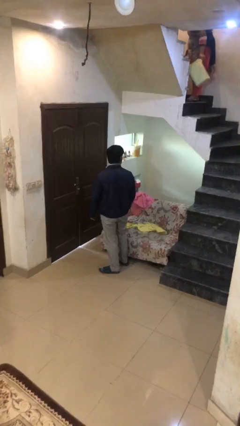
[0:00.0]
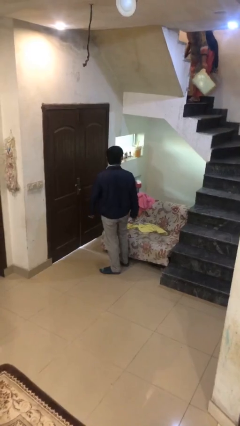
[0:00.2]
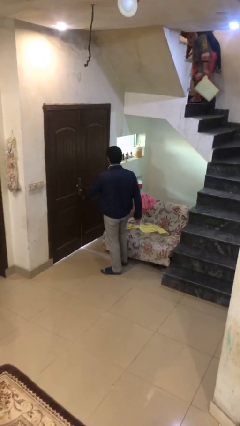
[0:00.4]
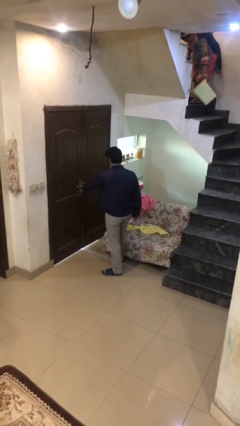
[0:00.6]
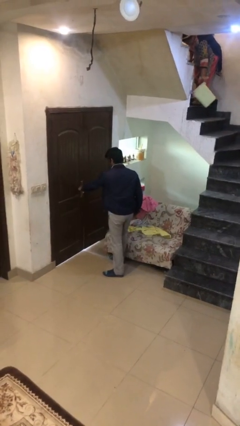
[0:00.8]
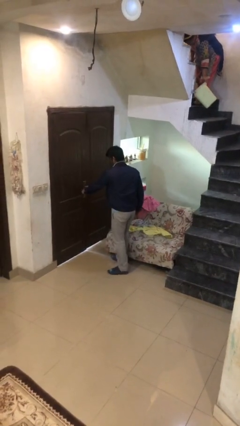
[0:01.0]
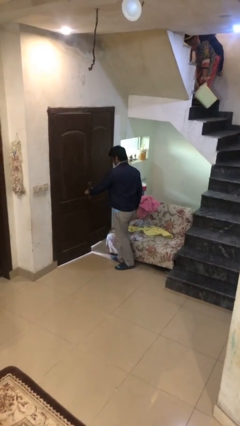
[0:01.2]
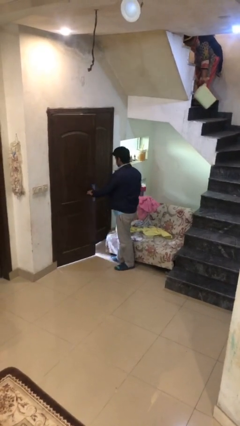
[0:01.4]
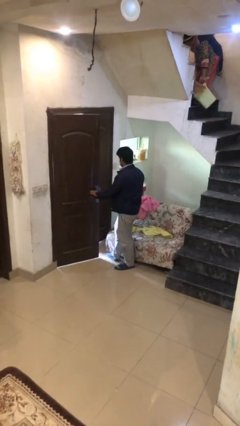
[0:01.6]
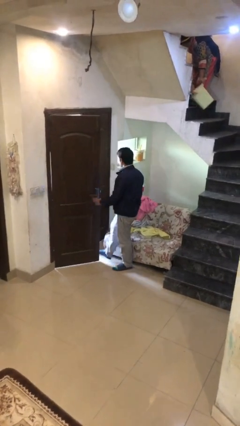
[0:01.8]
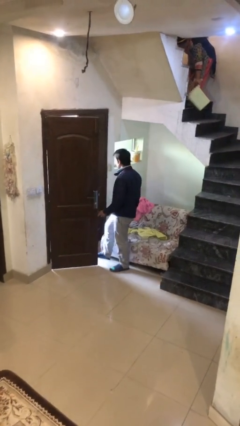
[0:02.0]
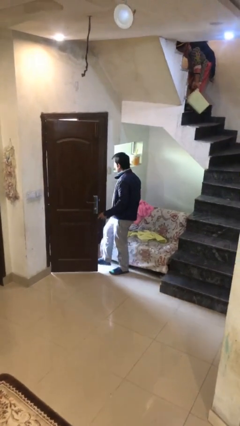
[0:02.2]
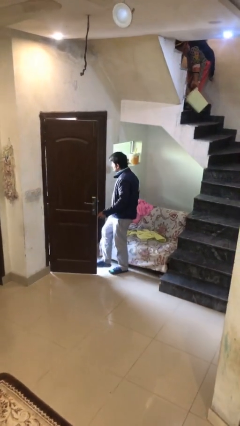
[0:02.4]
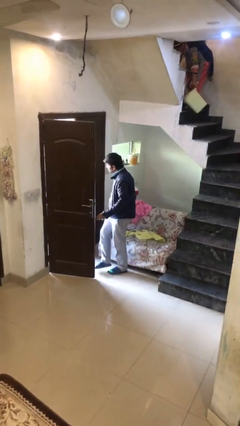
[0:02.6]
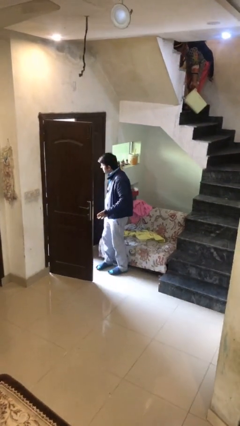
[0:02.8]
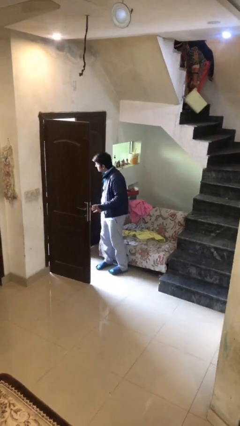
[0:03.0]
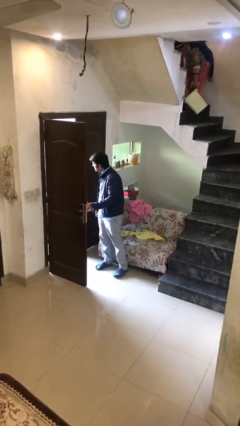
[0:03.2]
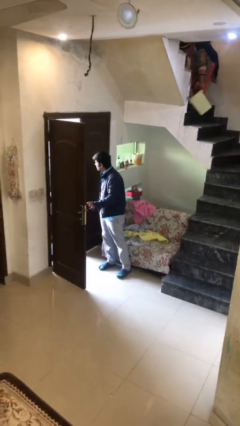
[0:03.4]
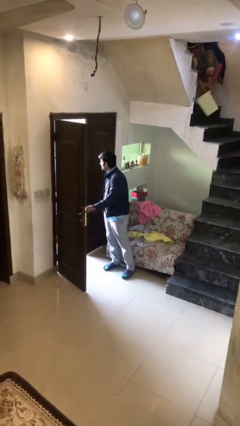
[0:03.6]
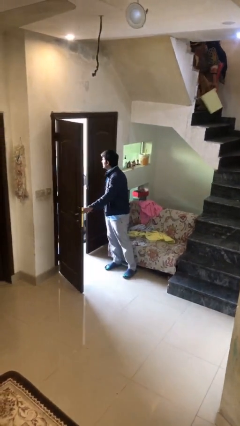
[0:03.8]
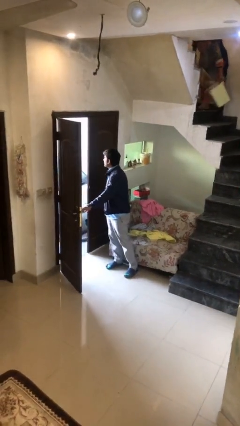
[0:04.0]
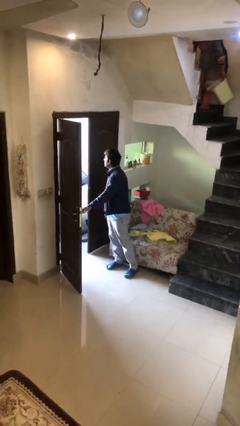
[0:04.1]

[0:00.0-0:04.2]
person opens facility door

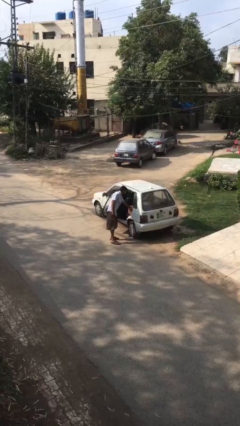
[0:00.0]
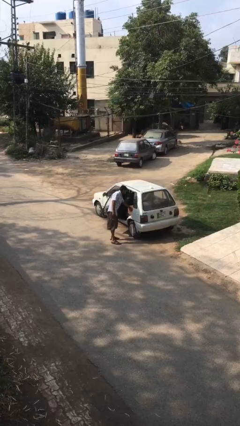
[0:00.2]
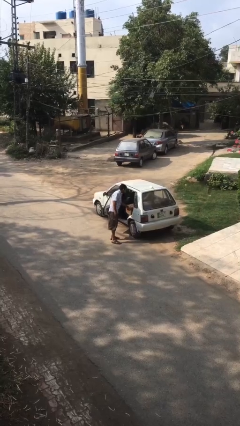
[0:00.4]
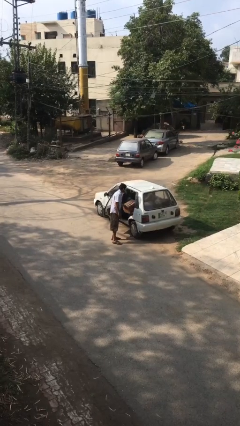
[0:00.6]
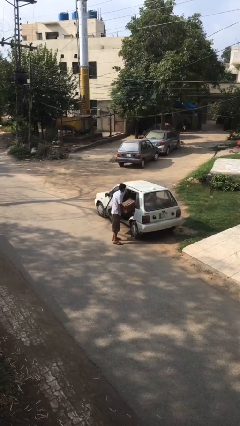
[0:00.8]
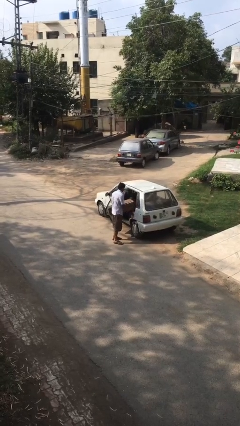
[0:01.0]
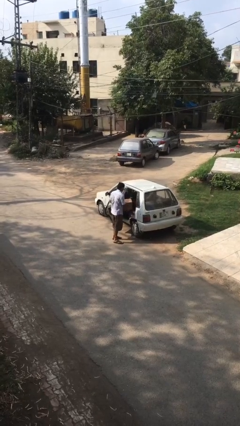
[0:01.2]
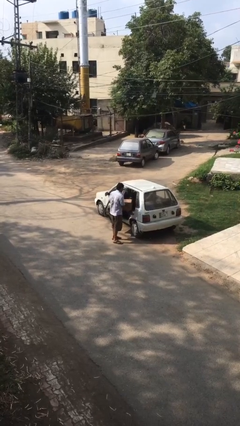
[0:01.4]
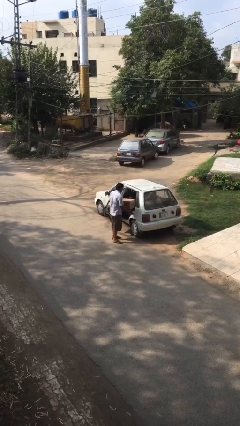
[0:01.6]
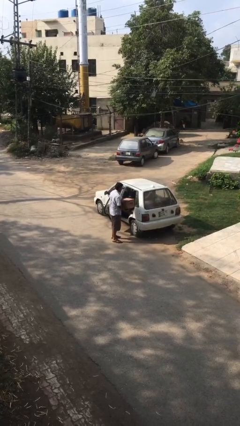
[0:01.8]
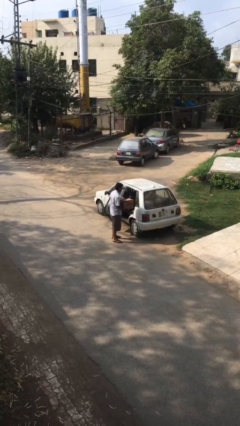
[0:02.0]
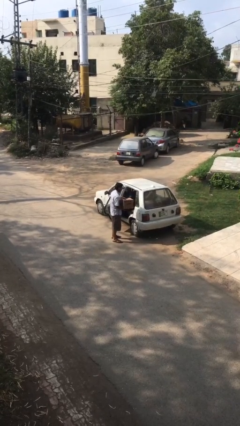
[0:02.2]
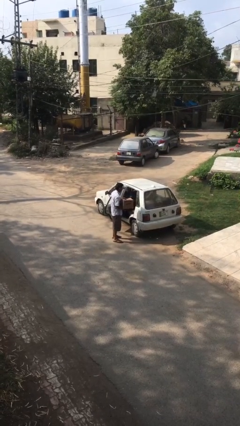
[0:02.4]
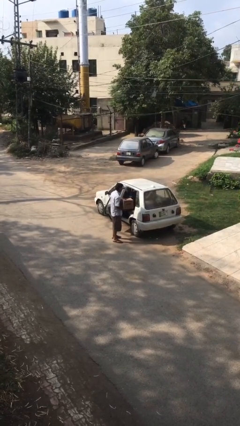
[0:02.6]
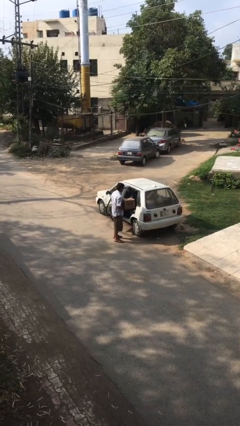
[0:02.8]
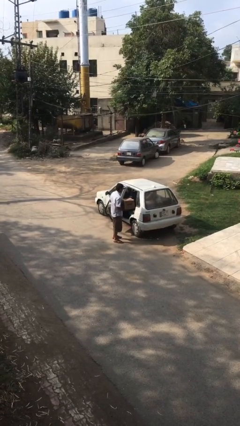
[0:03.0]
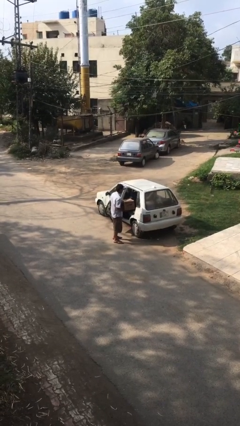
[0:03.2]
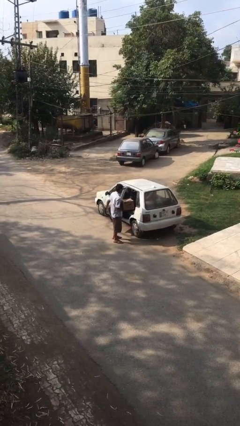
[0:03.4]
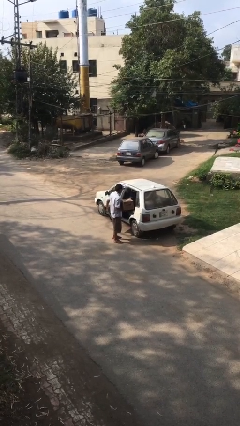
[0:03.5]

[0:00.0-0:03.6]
person unloads car

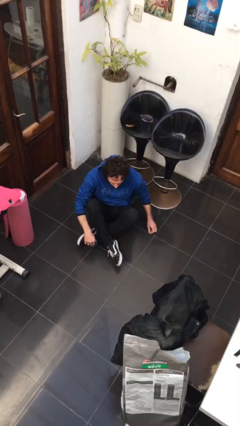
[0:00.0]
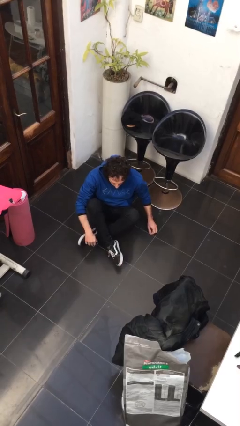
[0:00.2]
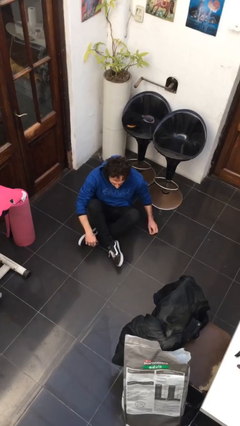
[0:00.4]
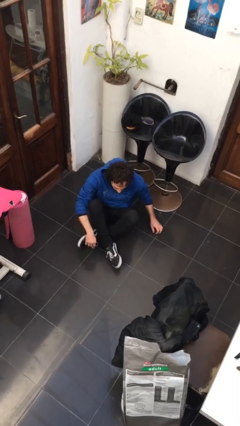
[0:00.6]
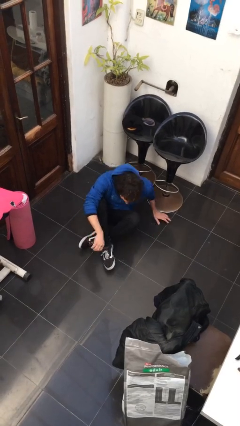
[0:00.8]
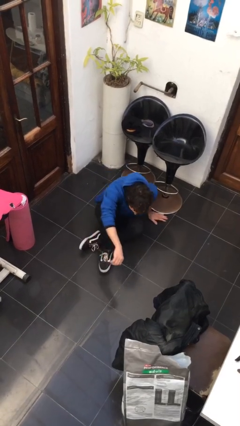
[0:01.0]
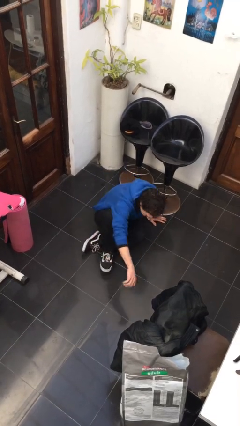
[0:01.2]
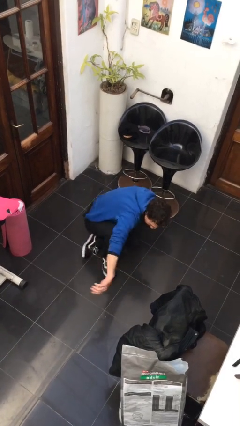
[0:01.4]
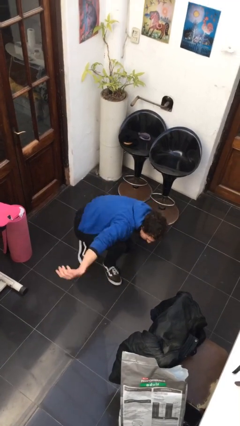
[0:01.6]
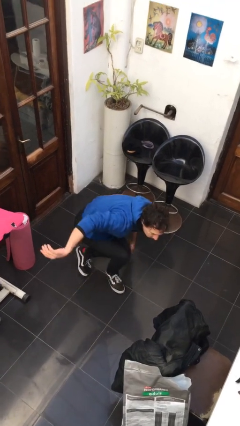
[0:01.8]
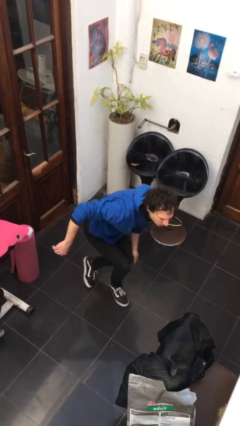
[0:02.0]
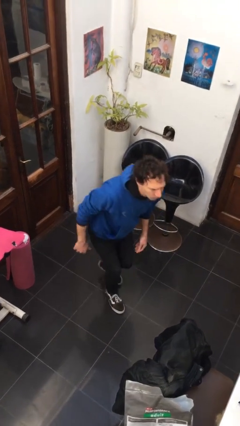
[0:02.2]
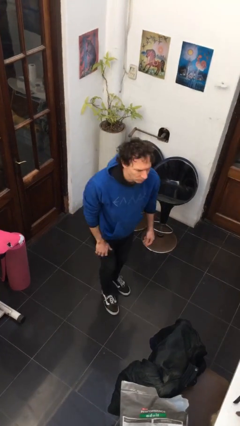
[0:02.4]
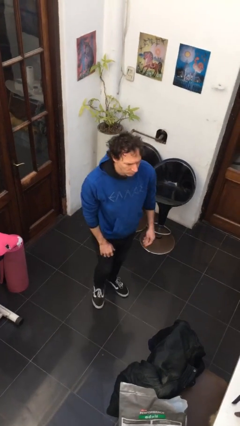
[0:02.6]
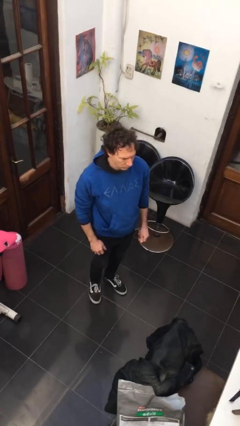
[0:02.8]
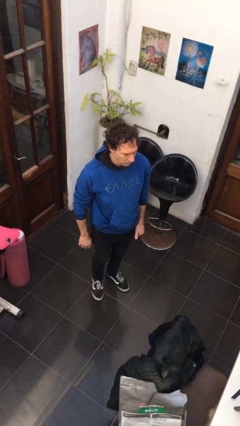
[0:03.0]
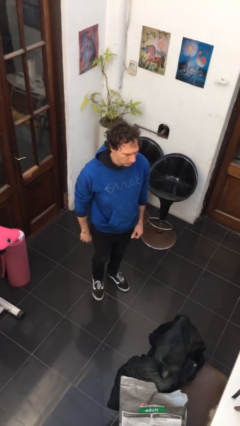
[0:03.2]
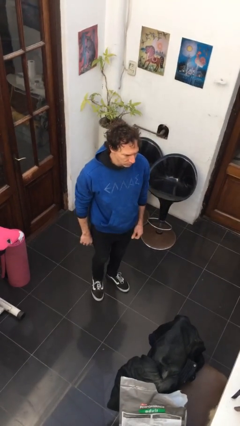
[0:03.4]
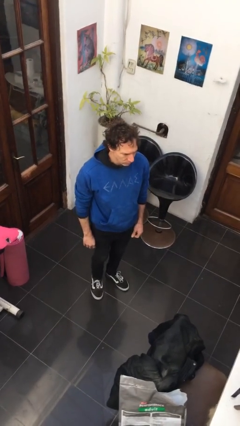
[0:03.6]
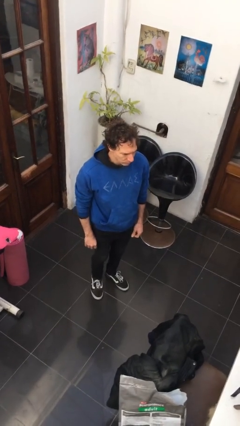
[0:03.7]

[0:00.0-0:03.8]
person stands up from floor

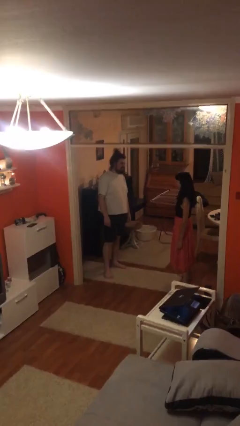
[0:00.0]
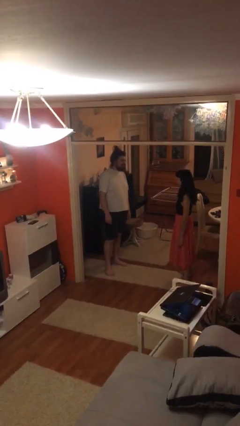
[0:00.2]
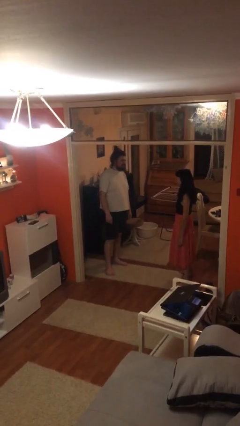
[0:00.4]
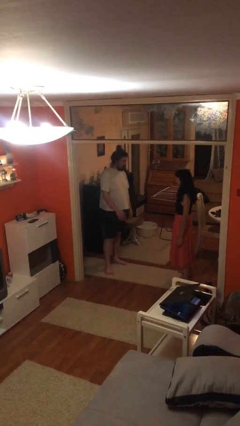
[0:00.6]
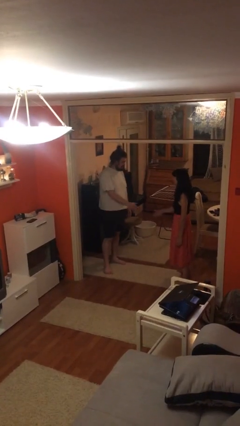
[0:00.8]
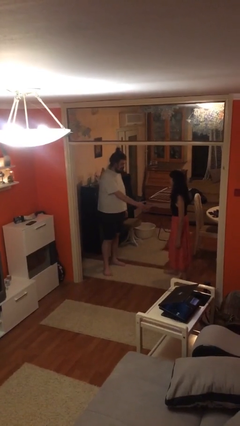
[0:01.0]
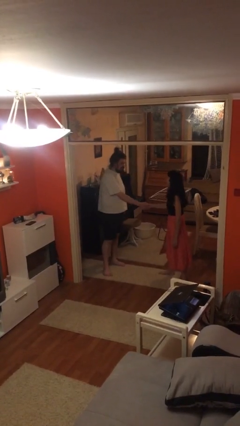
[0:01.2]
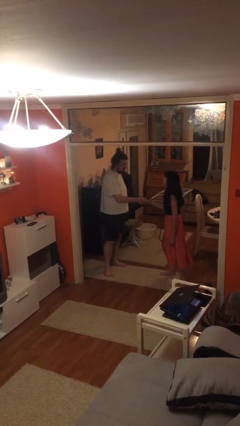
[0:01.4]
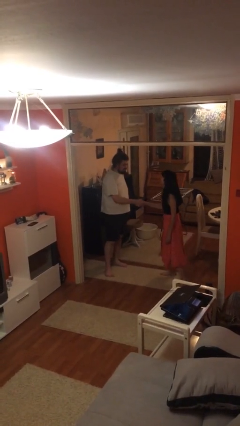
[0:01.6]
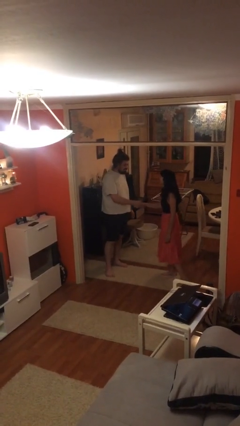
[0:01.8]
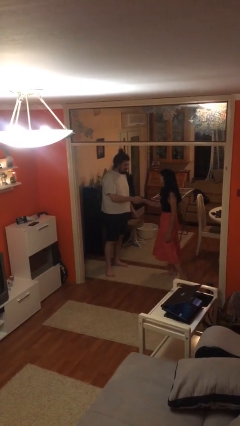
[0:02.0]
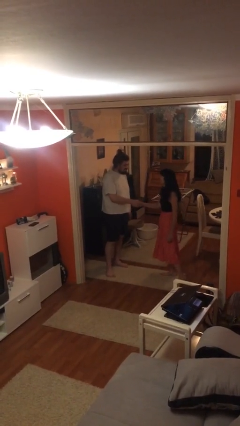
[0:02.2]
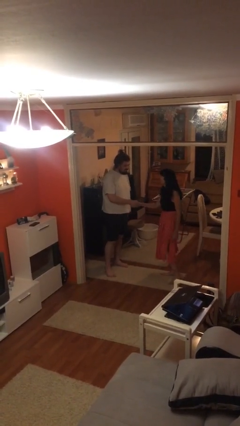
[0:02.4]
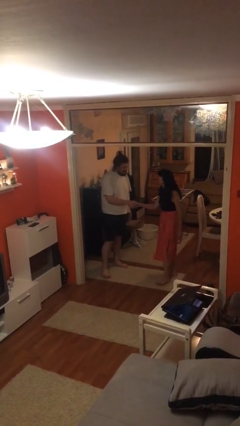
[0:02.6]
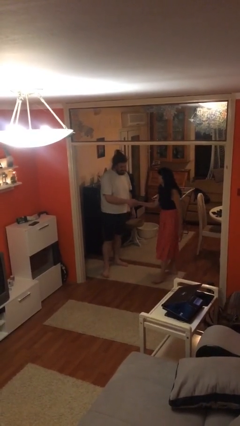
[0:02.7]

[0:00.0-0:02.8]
person shakes hand

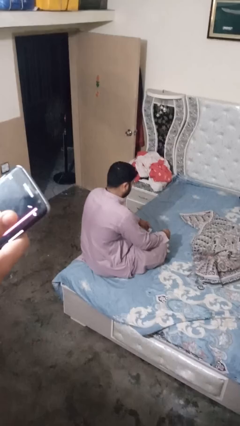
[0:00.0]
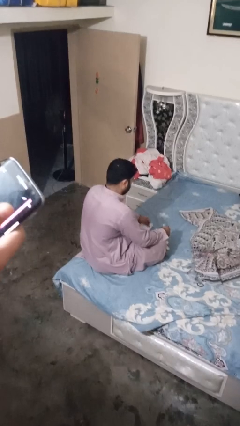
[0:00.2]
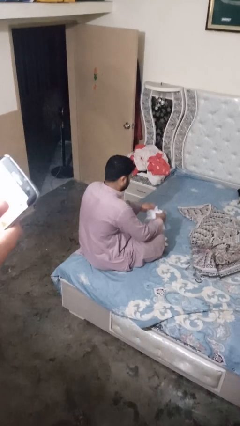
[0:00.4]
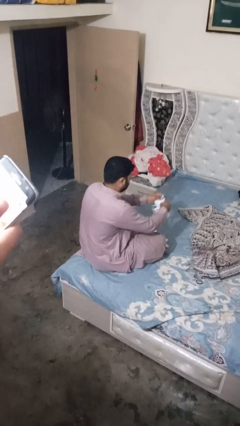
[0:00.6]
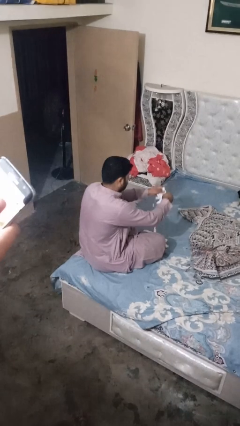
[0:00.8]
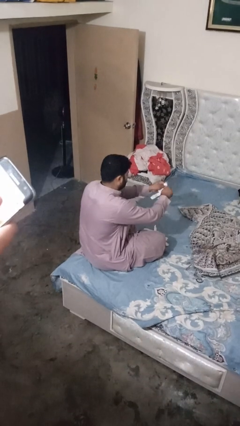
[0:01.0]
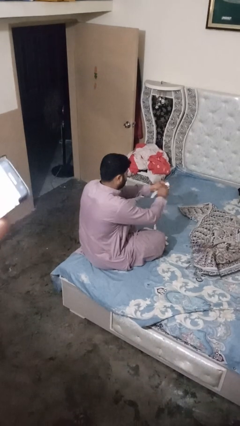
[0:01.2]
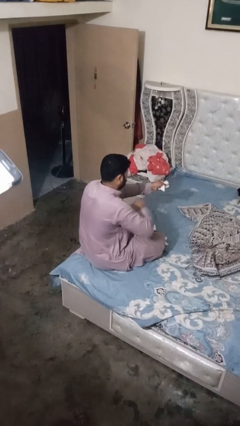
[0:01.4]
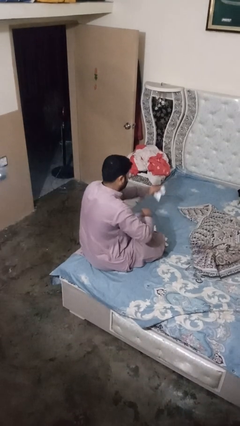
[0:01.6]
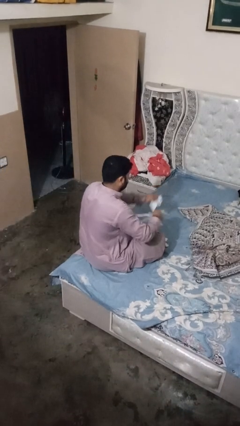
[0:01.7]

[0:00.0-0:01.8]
person tears paper

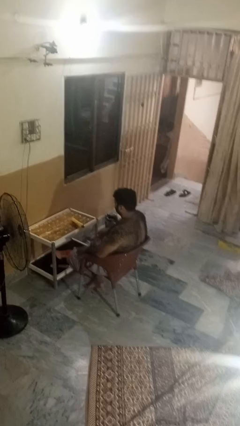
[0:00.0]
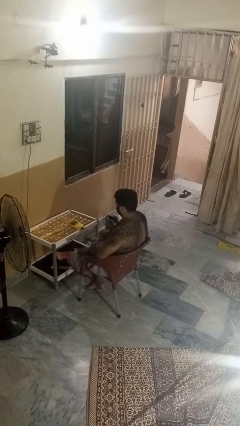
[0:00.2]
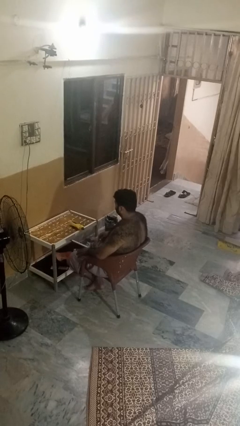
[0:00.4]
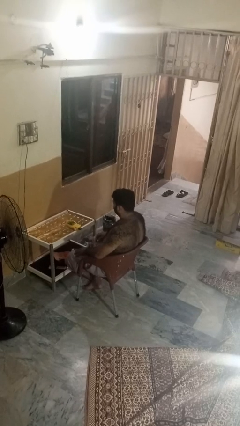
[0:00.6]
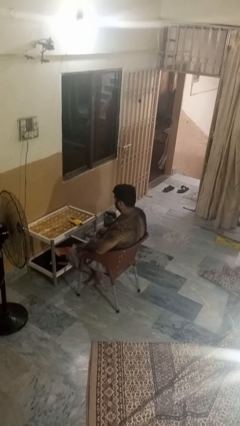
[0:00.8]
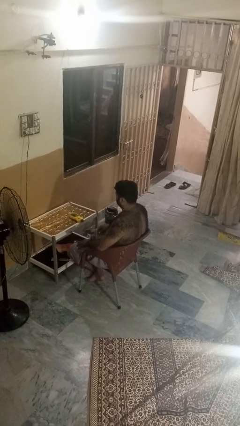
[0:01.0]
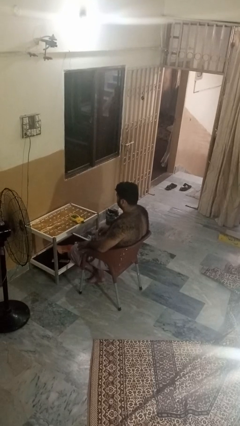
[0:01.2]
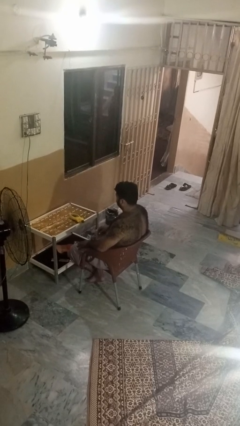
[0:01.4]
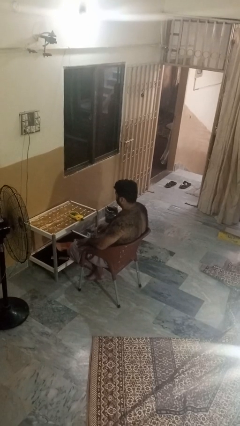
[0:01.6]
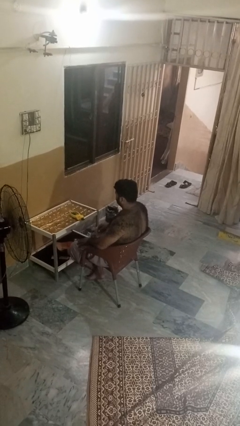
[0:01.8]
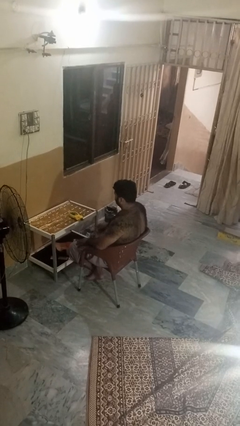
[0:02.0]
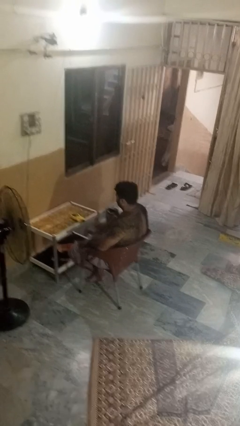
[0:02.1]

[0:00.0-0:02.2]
person throws object on table
